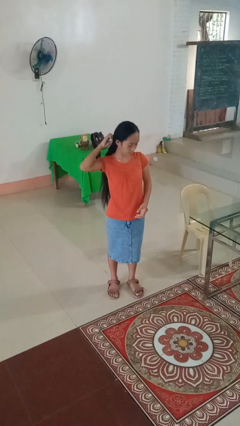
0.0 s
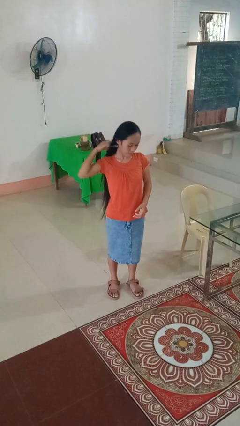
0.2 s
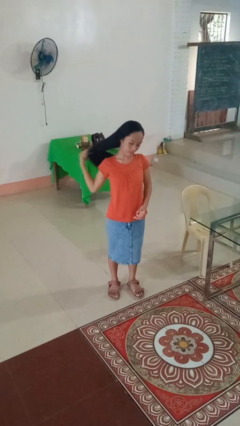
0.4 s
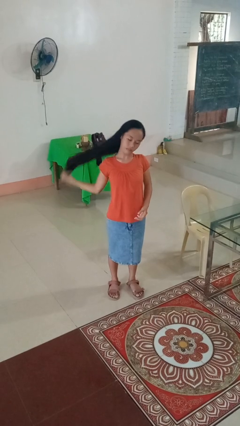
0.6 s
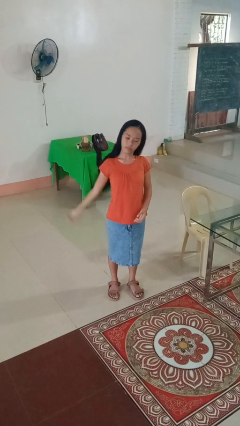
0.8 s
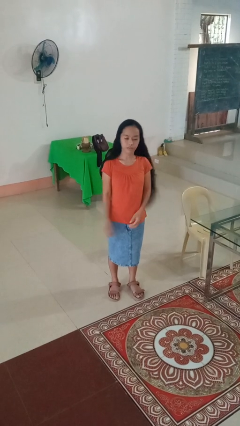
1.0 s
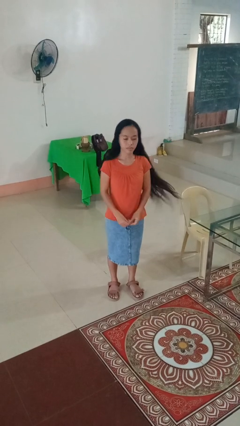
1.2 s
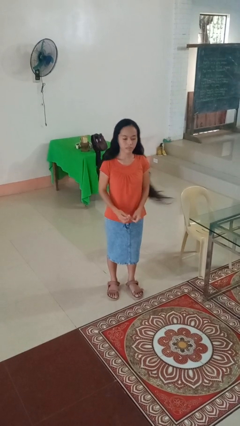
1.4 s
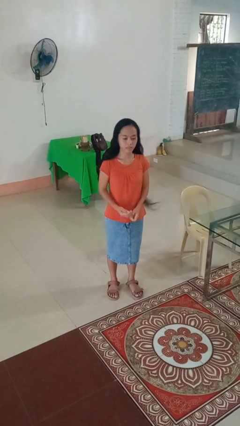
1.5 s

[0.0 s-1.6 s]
person takes off hairtie

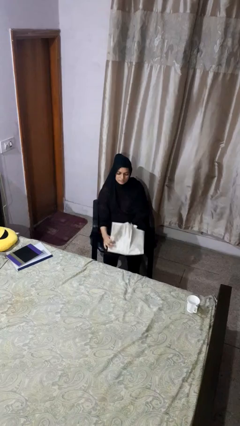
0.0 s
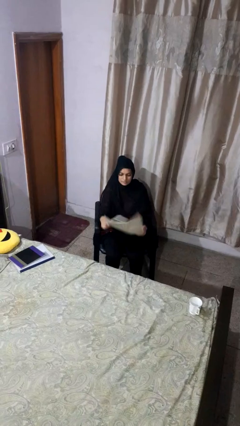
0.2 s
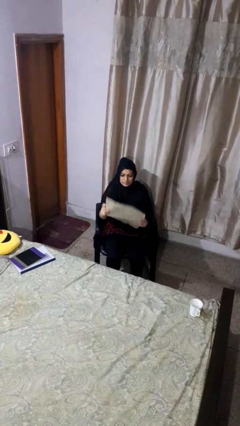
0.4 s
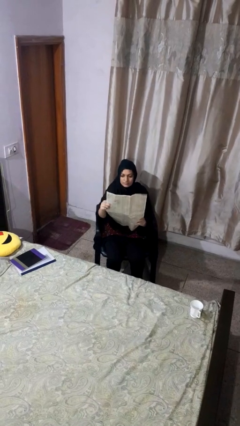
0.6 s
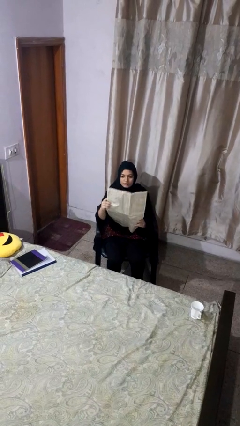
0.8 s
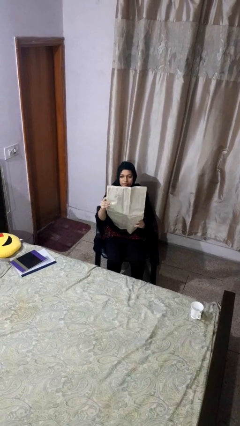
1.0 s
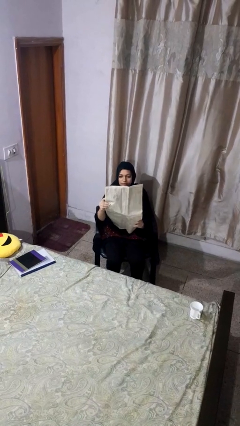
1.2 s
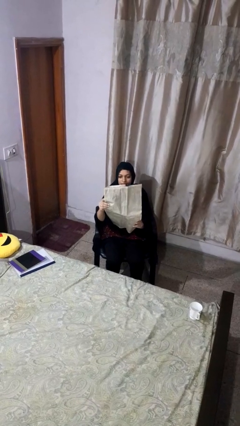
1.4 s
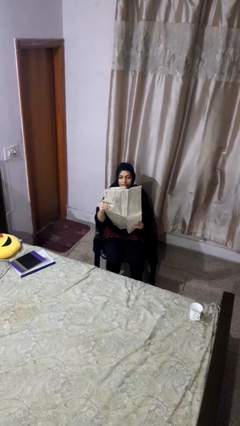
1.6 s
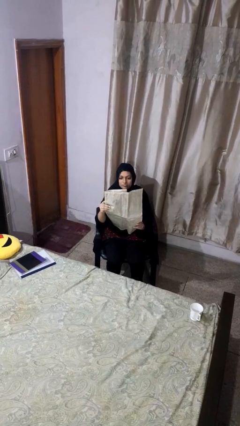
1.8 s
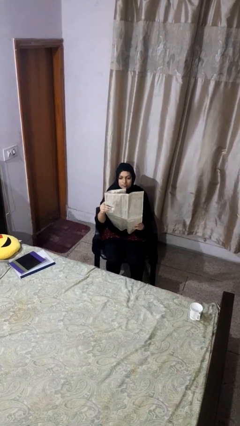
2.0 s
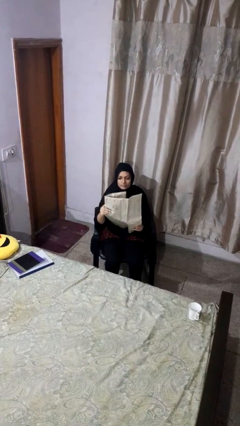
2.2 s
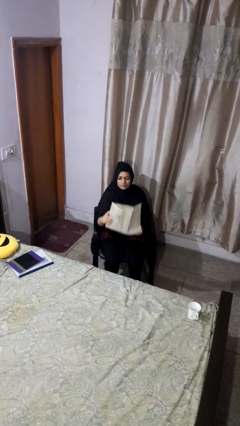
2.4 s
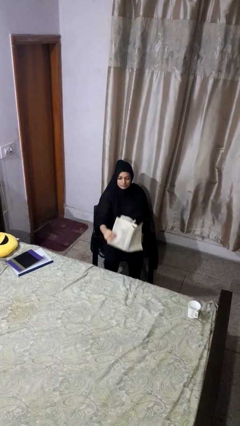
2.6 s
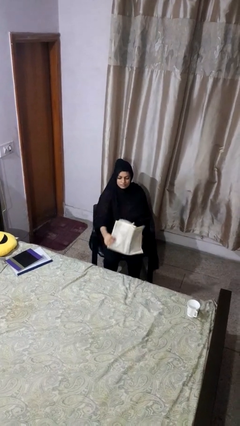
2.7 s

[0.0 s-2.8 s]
person reads newspaper

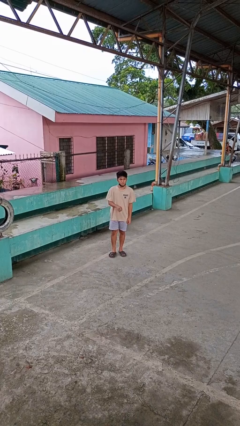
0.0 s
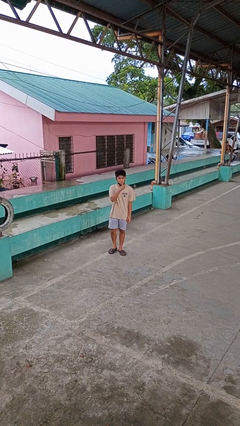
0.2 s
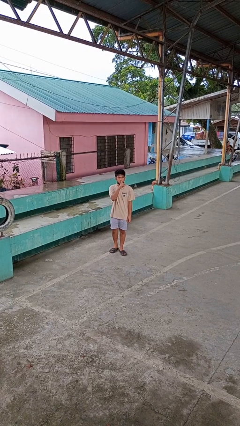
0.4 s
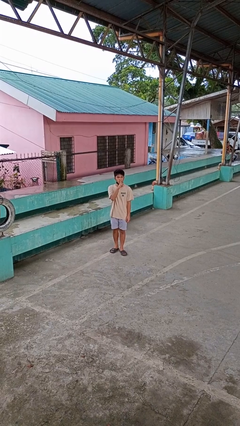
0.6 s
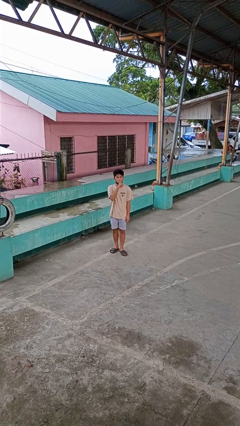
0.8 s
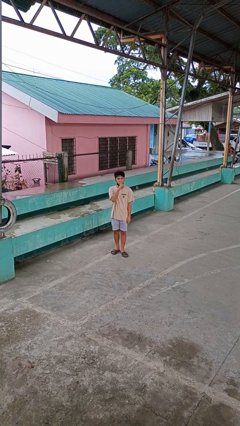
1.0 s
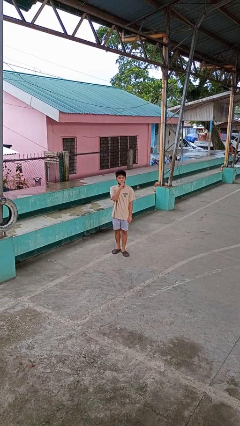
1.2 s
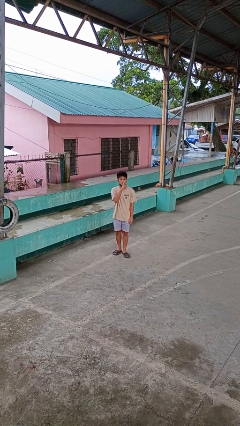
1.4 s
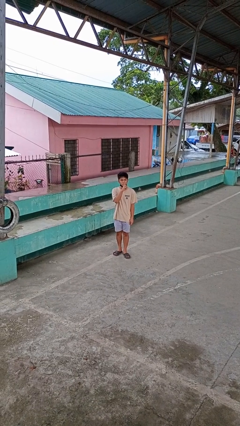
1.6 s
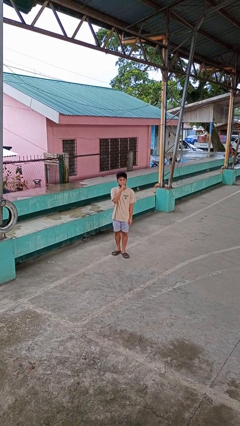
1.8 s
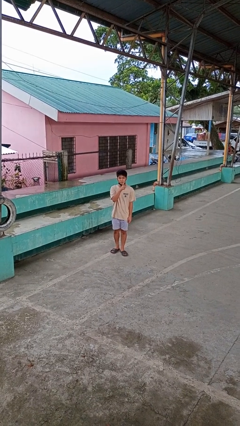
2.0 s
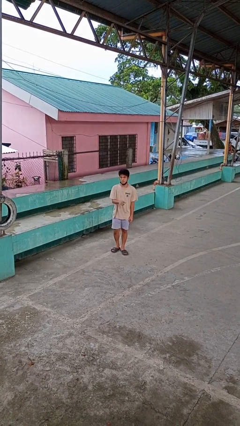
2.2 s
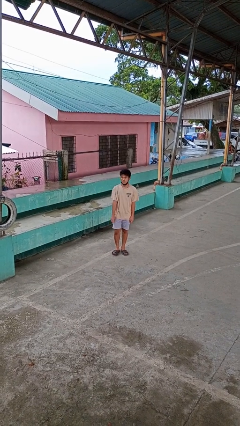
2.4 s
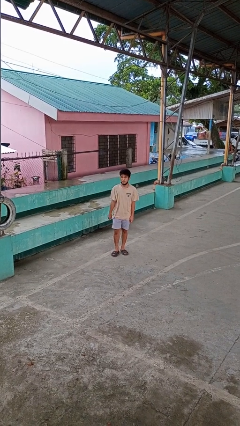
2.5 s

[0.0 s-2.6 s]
person gestures be quiet

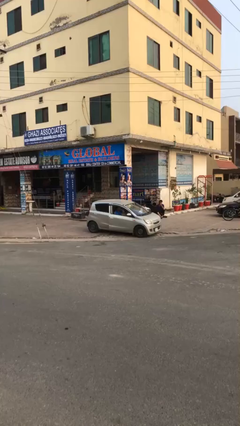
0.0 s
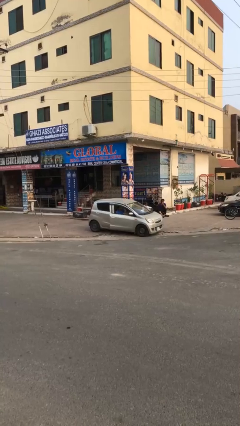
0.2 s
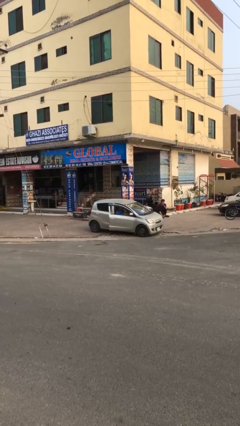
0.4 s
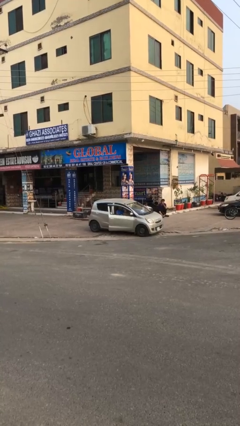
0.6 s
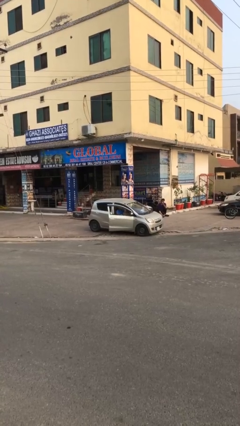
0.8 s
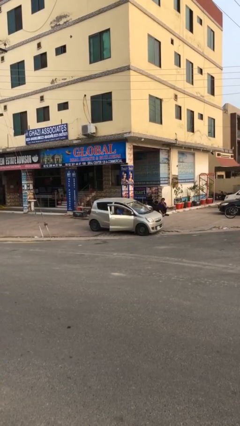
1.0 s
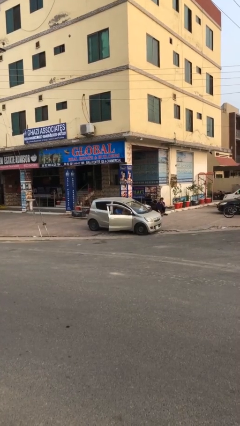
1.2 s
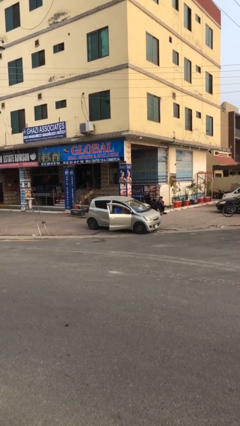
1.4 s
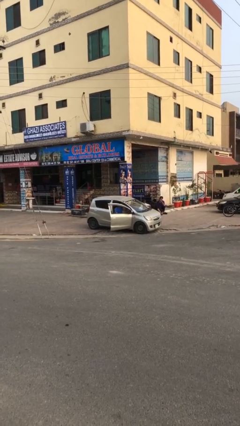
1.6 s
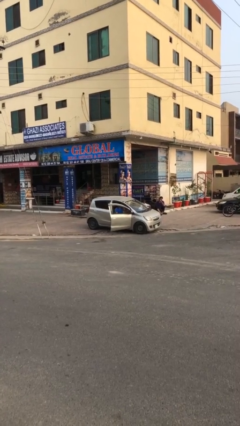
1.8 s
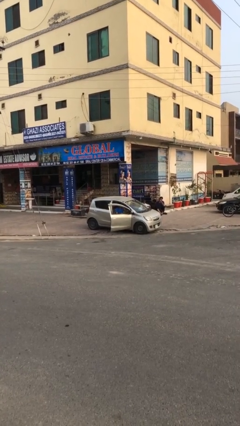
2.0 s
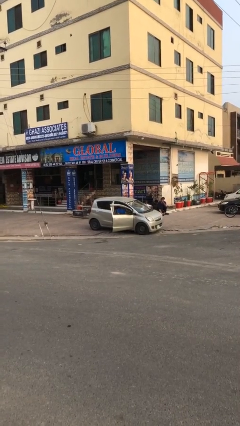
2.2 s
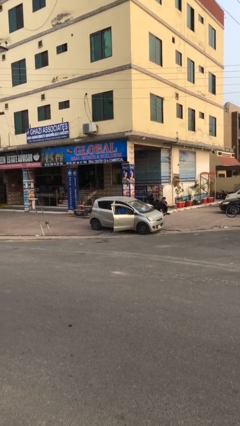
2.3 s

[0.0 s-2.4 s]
person opens car door

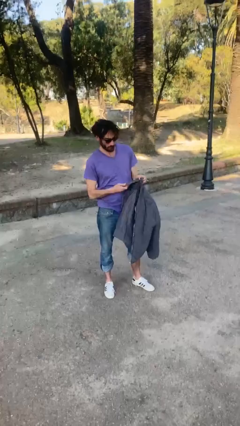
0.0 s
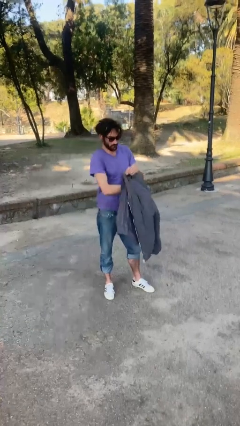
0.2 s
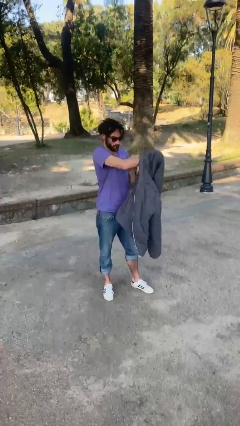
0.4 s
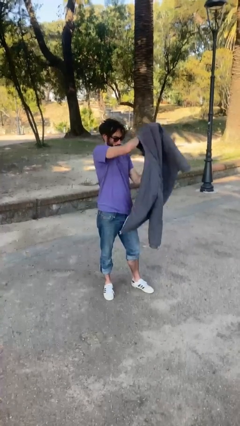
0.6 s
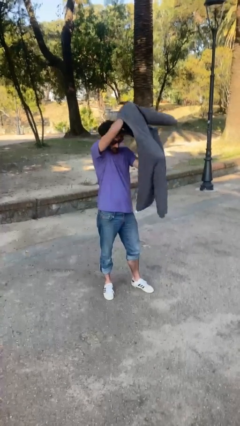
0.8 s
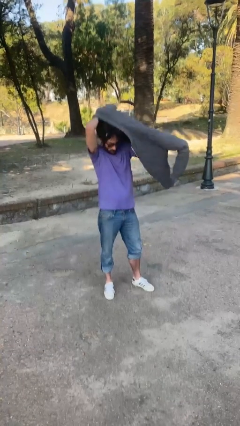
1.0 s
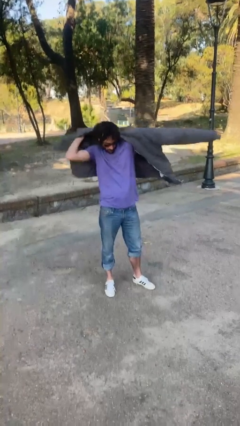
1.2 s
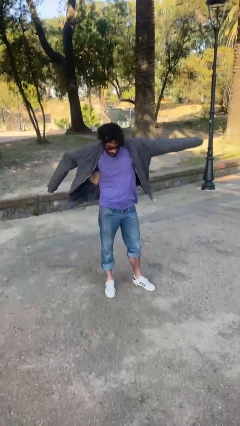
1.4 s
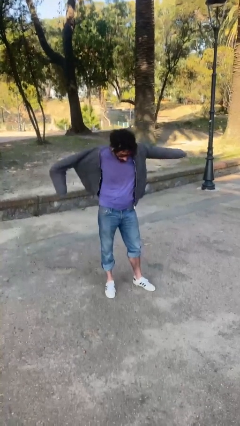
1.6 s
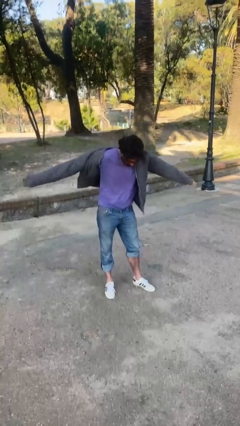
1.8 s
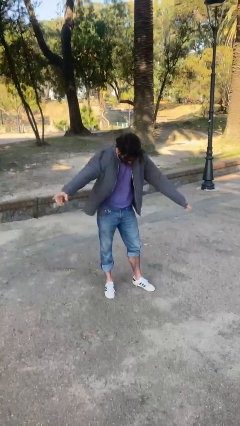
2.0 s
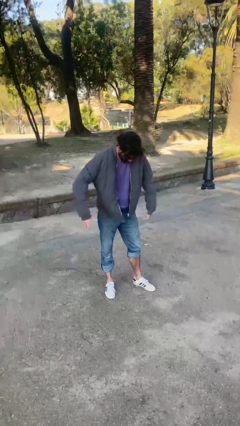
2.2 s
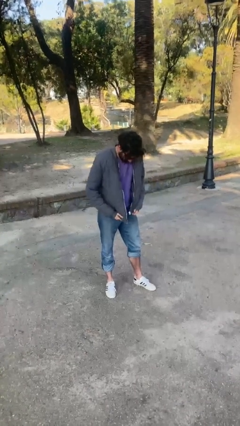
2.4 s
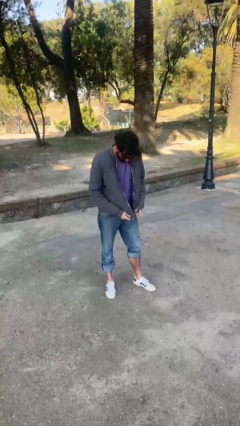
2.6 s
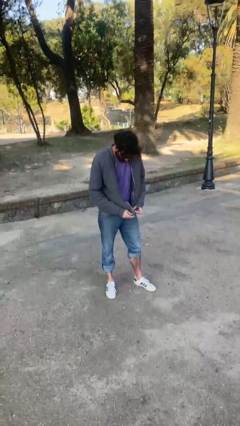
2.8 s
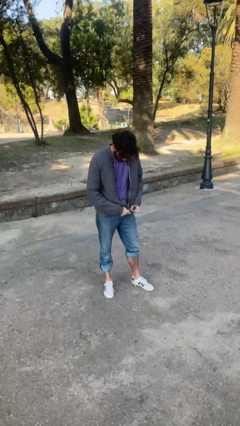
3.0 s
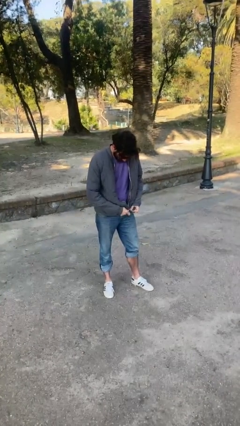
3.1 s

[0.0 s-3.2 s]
person puts on jacket

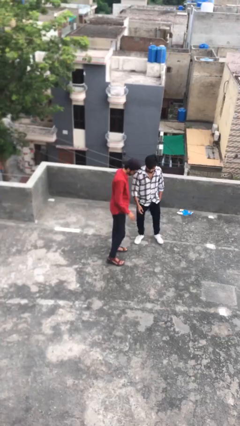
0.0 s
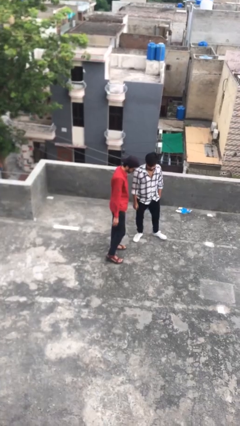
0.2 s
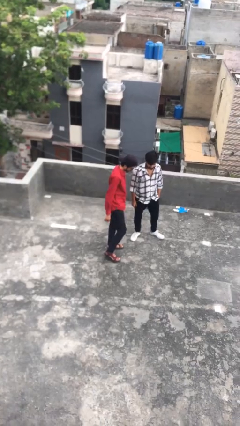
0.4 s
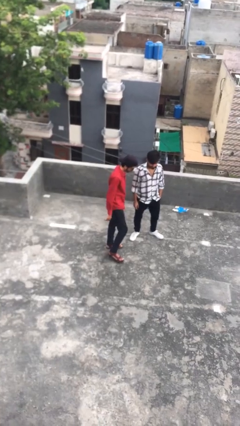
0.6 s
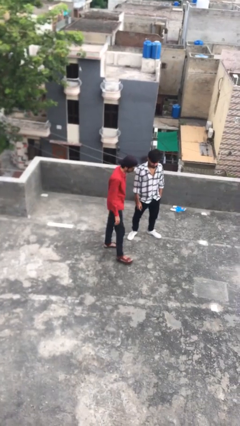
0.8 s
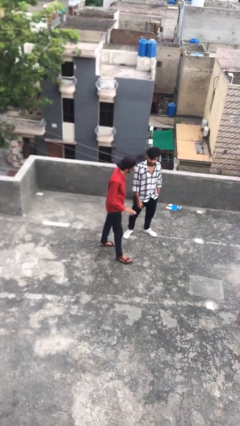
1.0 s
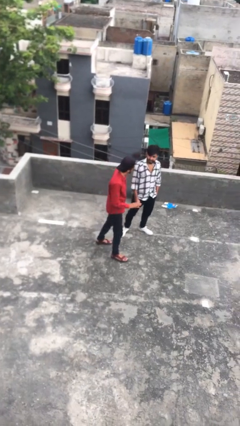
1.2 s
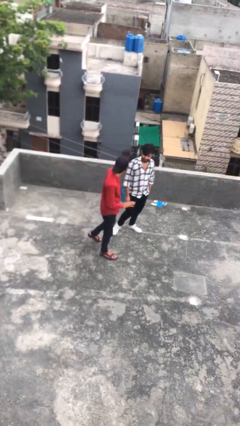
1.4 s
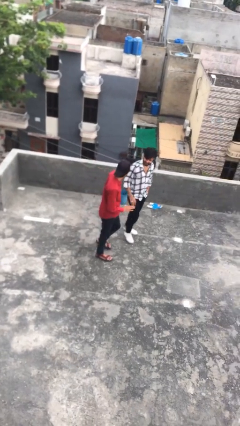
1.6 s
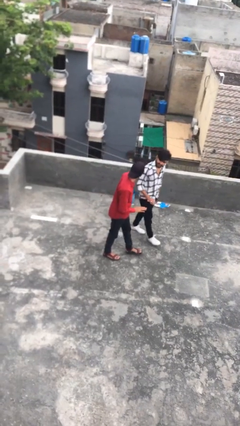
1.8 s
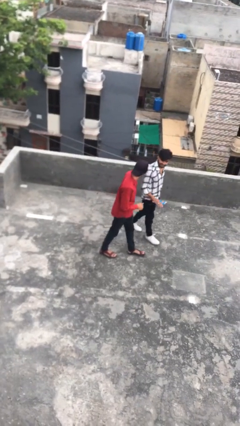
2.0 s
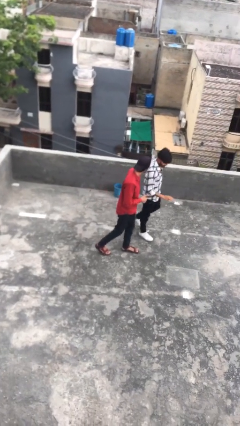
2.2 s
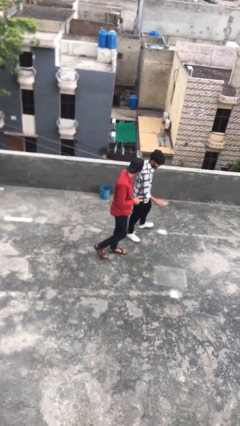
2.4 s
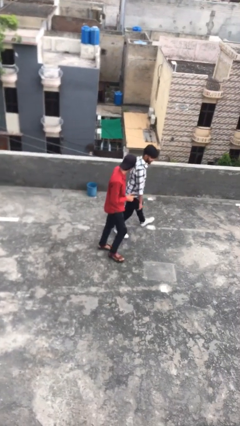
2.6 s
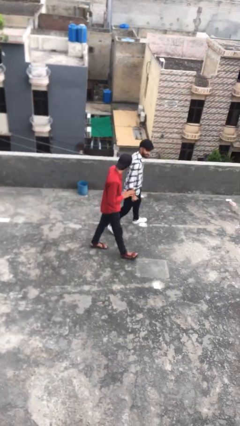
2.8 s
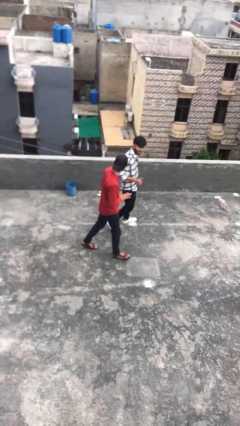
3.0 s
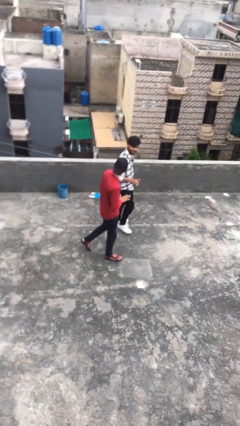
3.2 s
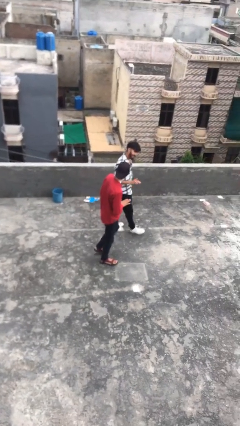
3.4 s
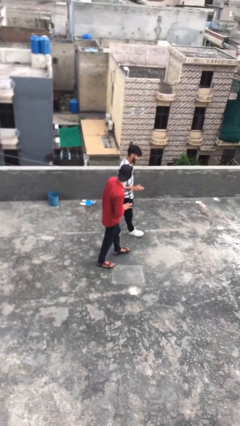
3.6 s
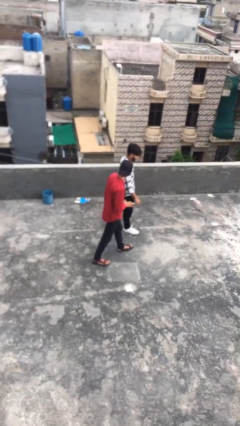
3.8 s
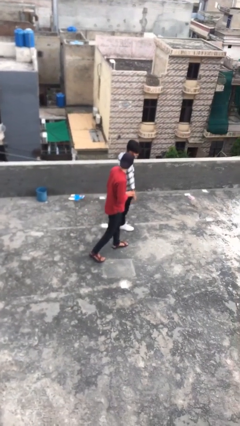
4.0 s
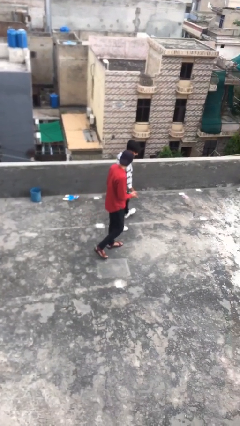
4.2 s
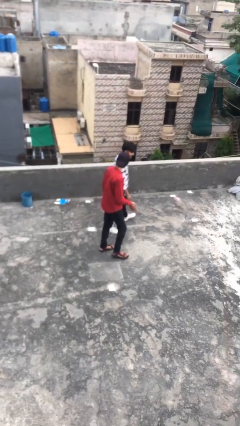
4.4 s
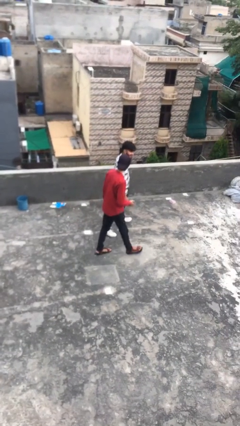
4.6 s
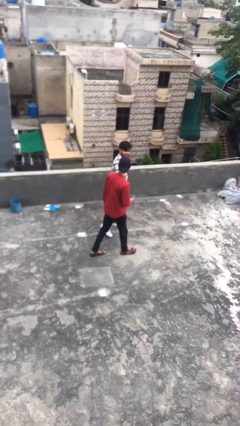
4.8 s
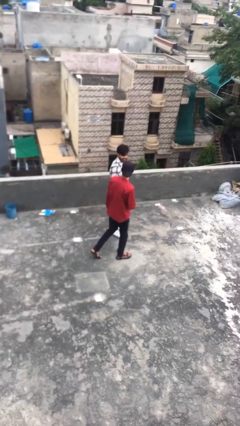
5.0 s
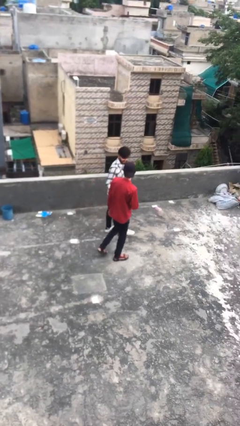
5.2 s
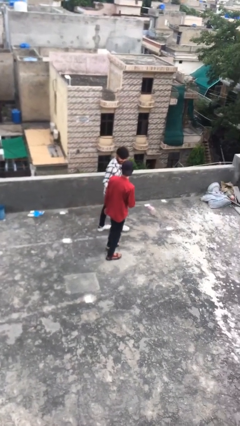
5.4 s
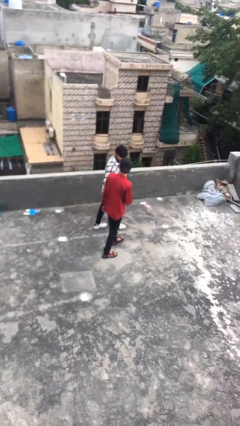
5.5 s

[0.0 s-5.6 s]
person talks to person
